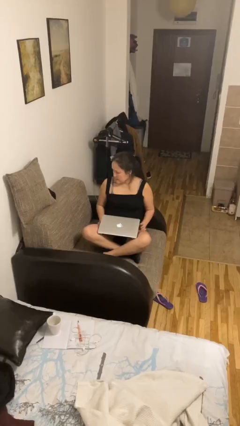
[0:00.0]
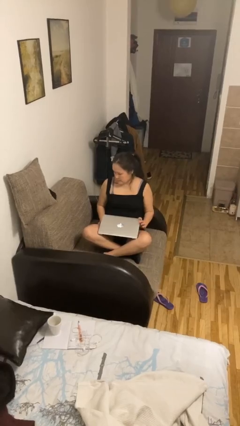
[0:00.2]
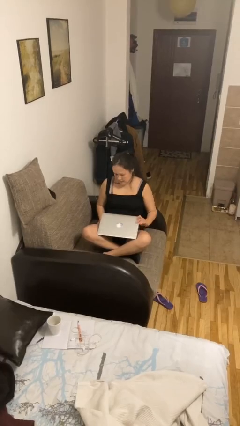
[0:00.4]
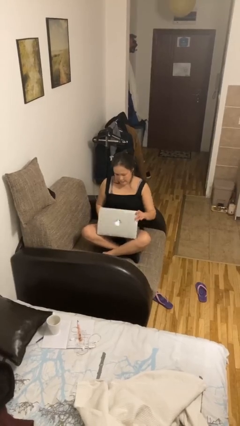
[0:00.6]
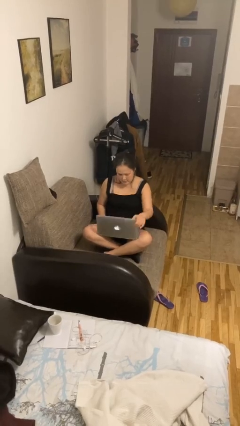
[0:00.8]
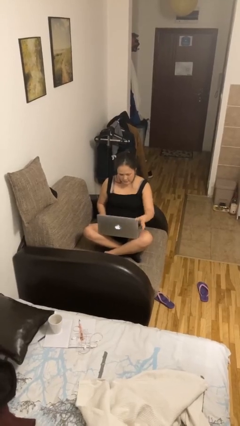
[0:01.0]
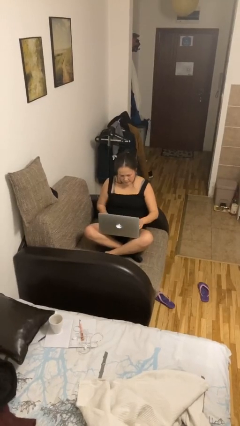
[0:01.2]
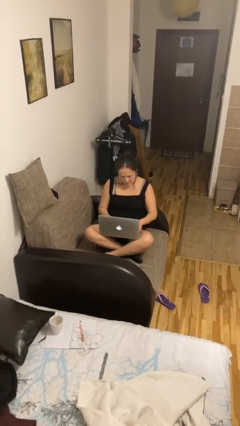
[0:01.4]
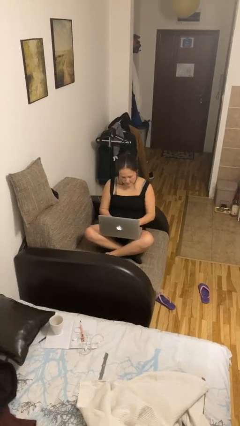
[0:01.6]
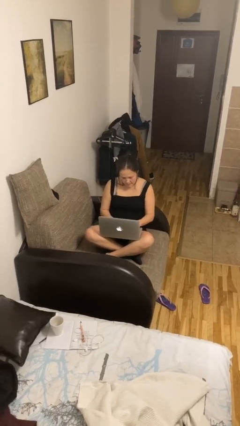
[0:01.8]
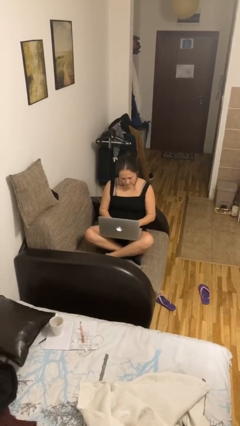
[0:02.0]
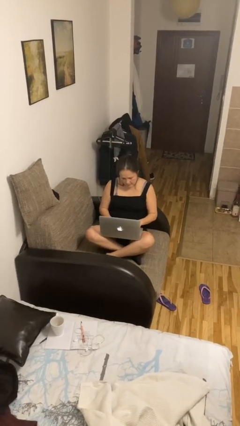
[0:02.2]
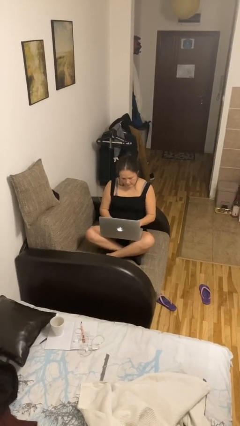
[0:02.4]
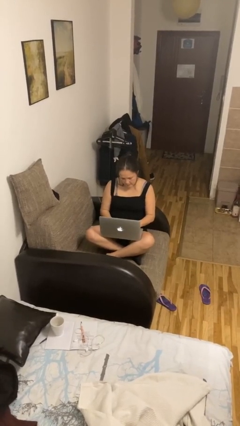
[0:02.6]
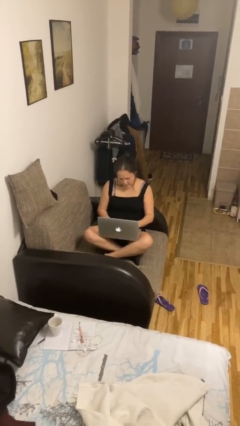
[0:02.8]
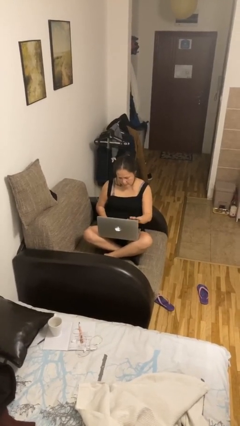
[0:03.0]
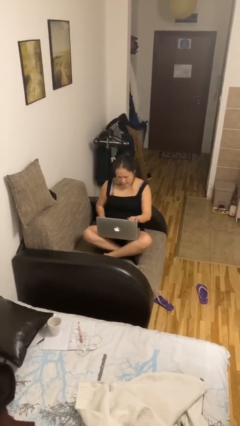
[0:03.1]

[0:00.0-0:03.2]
person interacts with laptop

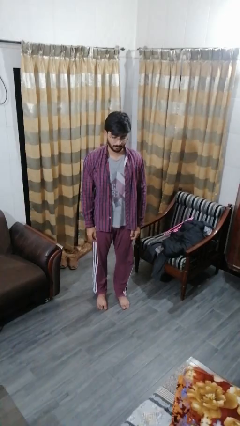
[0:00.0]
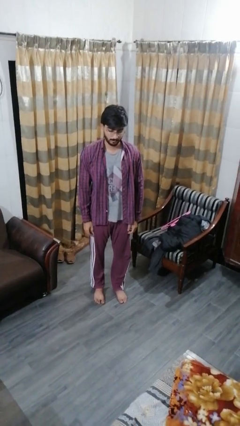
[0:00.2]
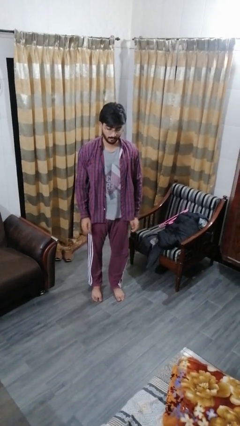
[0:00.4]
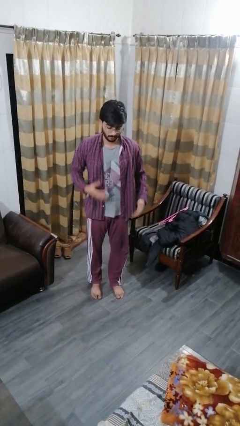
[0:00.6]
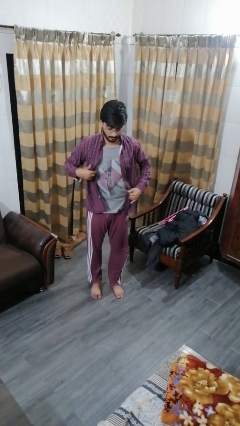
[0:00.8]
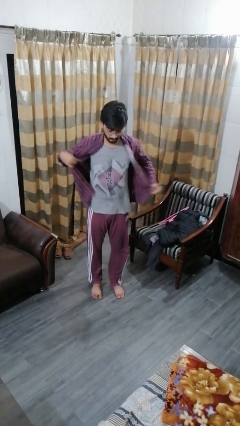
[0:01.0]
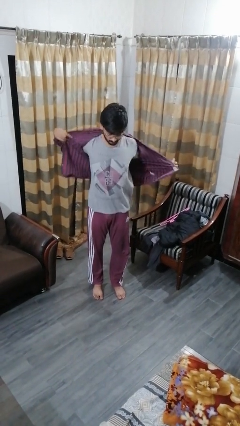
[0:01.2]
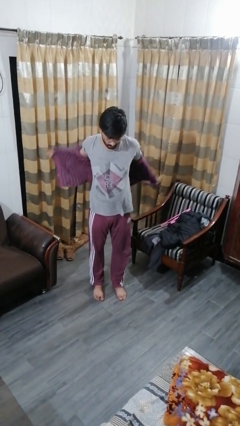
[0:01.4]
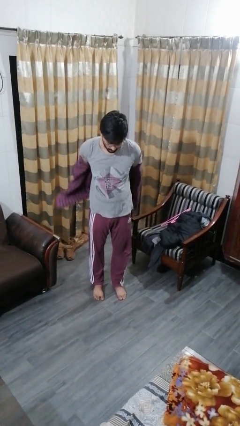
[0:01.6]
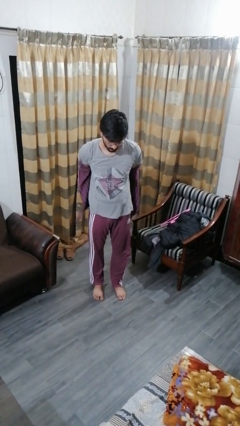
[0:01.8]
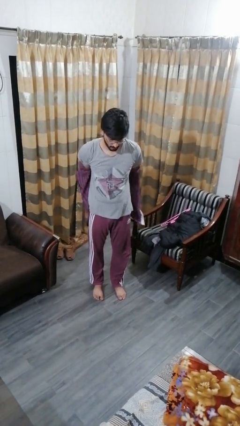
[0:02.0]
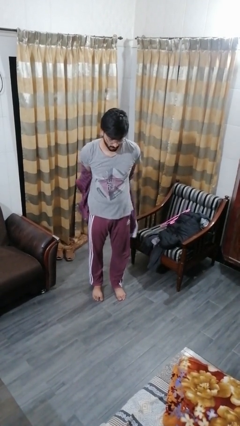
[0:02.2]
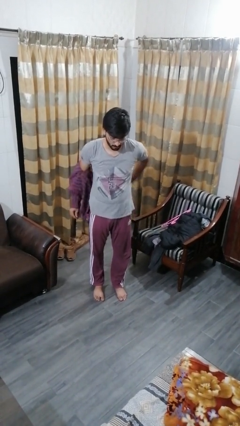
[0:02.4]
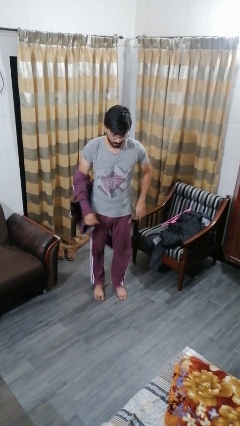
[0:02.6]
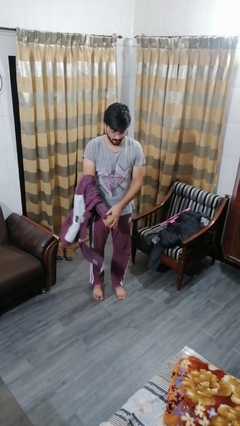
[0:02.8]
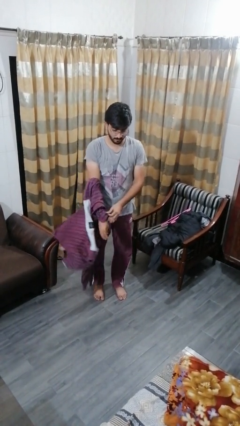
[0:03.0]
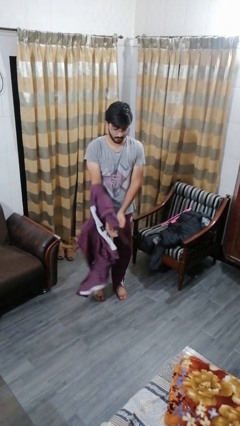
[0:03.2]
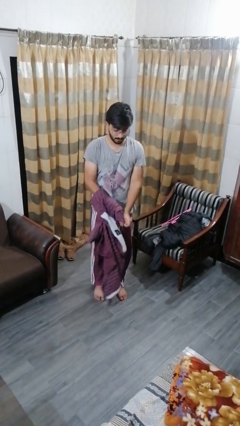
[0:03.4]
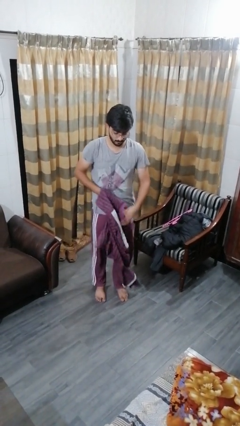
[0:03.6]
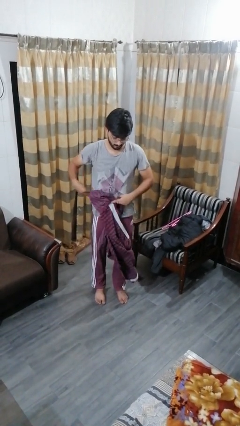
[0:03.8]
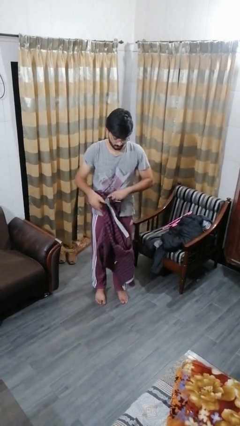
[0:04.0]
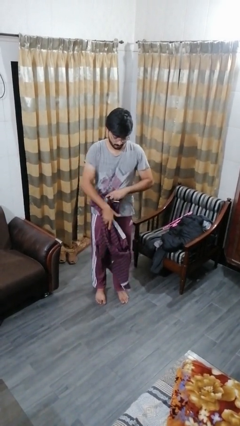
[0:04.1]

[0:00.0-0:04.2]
person takes off shirt

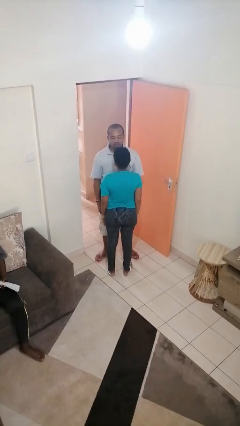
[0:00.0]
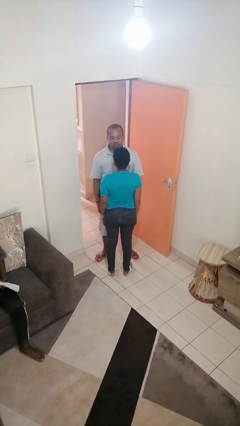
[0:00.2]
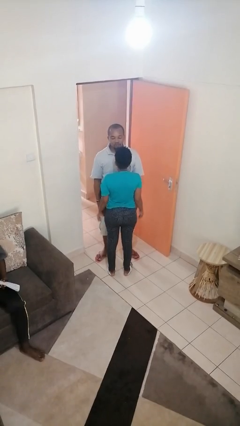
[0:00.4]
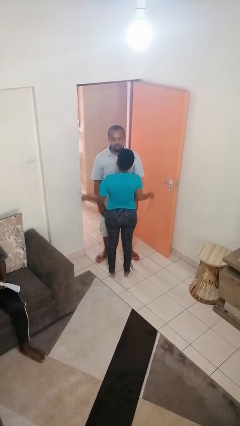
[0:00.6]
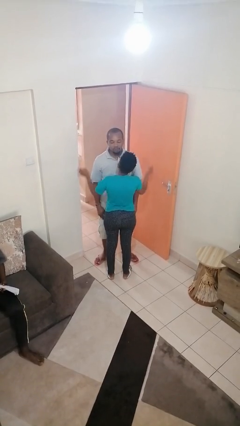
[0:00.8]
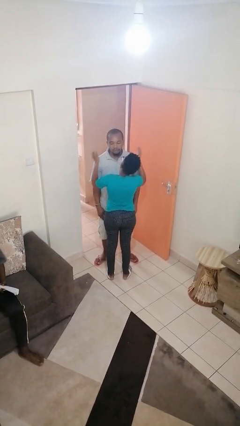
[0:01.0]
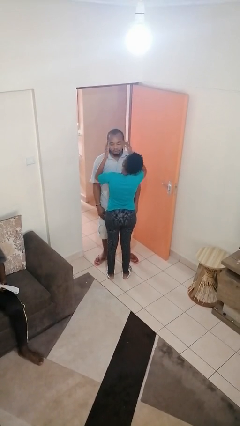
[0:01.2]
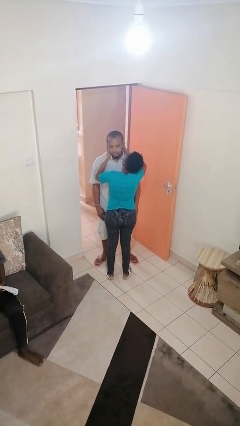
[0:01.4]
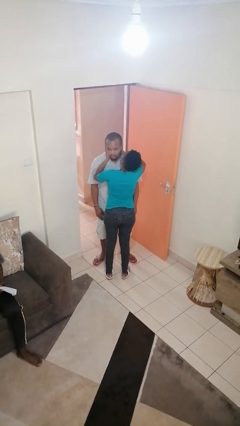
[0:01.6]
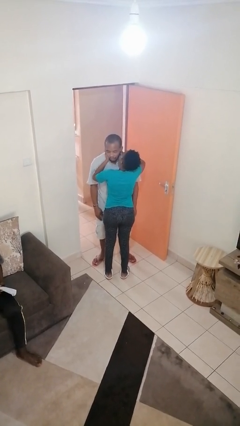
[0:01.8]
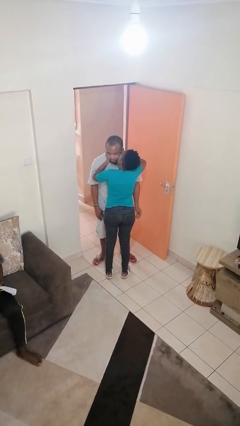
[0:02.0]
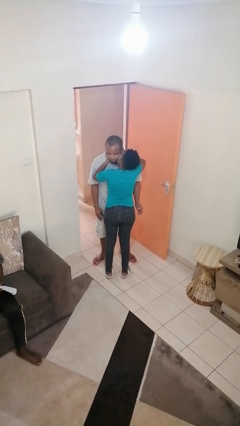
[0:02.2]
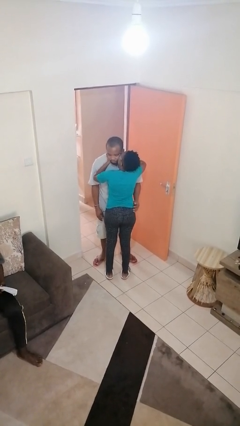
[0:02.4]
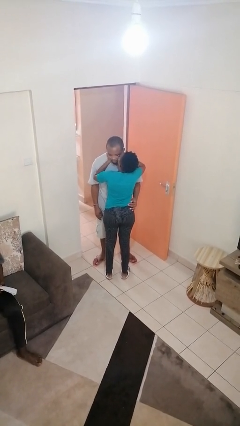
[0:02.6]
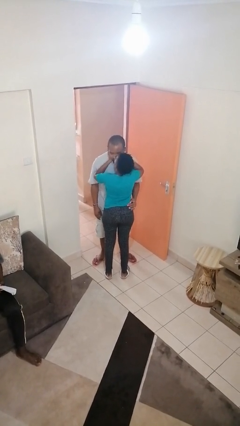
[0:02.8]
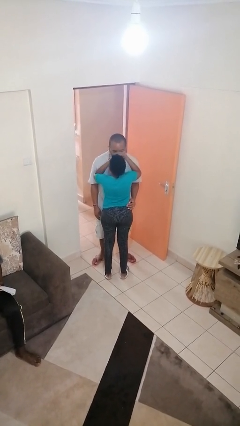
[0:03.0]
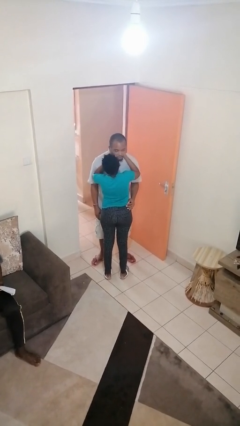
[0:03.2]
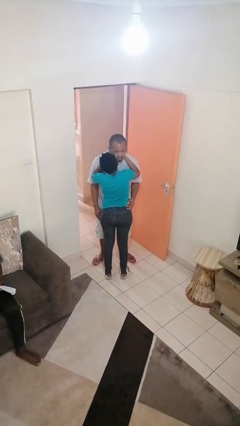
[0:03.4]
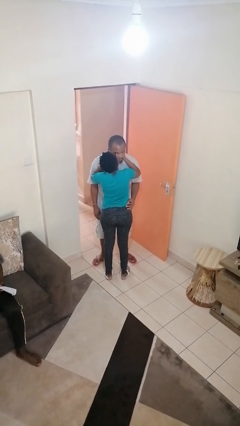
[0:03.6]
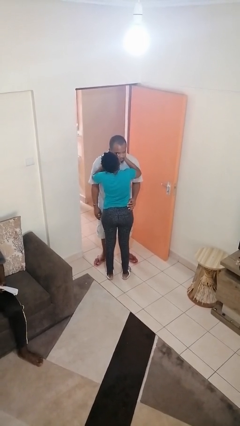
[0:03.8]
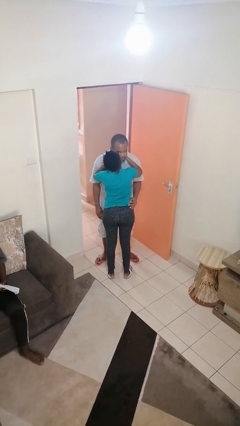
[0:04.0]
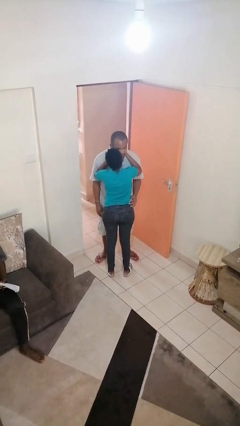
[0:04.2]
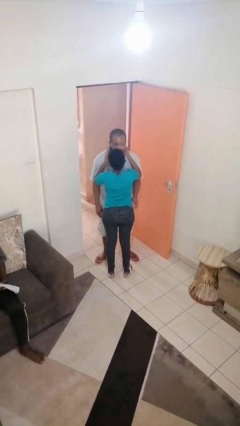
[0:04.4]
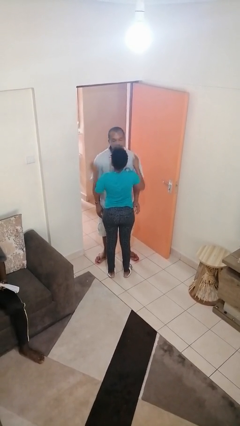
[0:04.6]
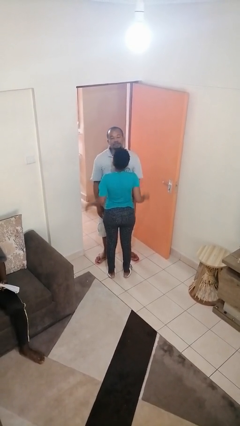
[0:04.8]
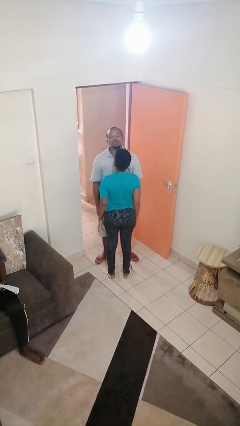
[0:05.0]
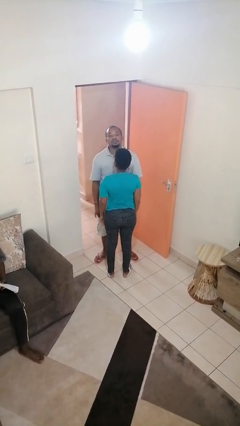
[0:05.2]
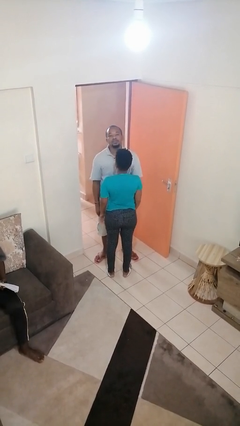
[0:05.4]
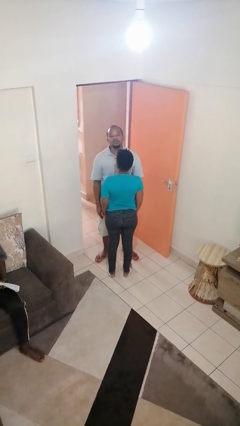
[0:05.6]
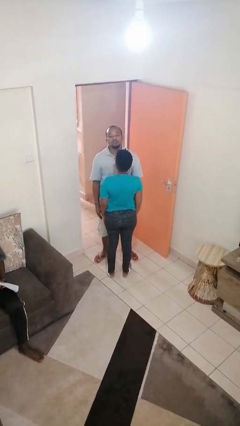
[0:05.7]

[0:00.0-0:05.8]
person kisses cheek of person

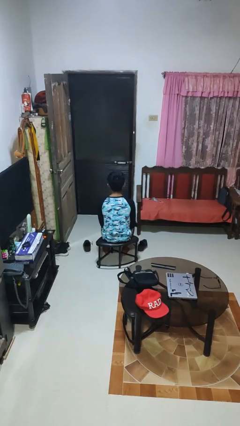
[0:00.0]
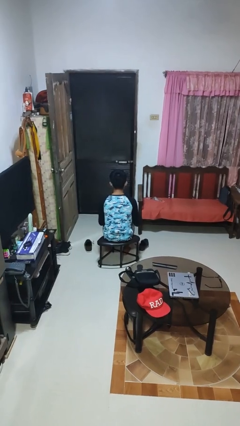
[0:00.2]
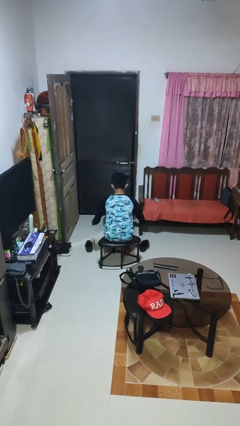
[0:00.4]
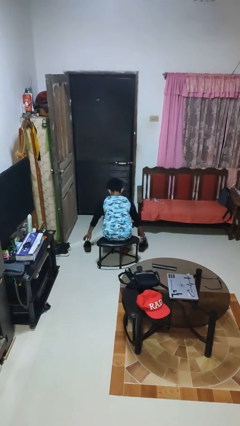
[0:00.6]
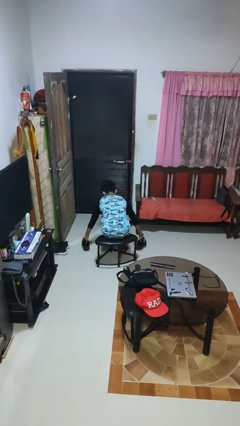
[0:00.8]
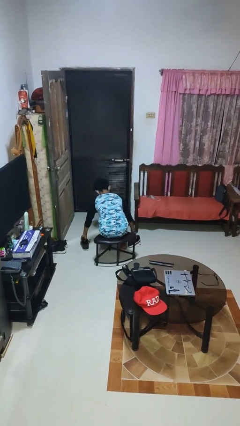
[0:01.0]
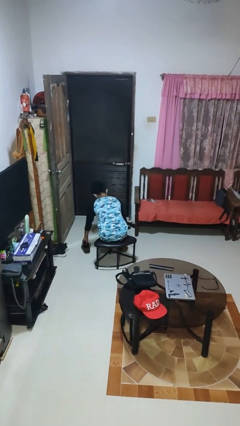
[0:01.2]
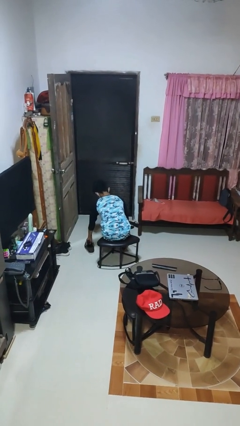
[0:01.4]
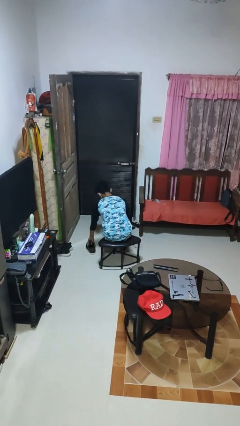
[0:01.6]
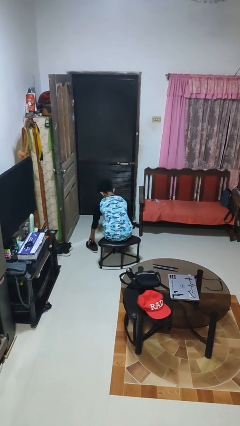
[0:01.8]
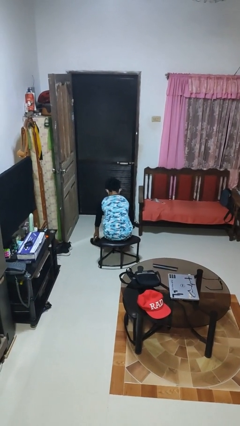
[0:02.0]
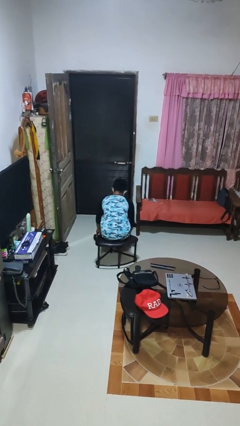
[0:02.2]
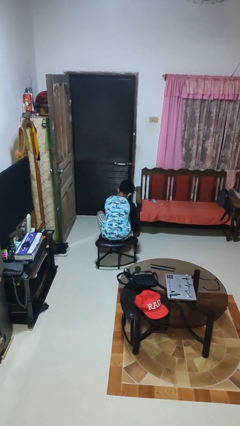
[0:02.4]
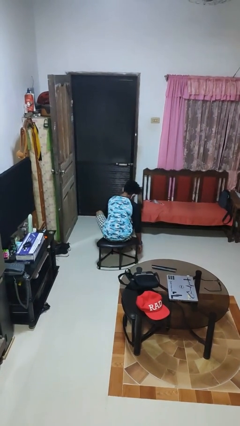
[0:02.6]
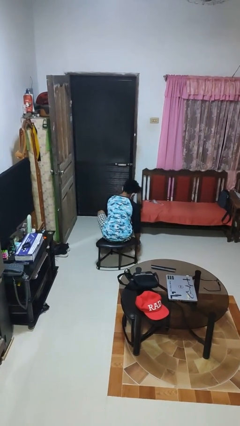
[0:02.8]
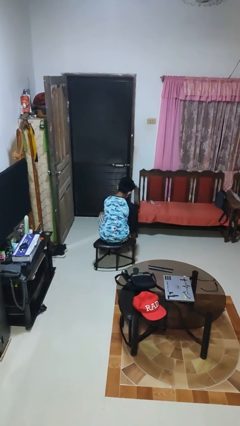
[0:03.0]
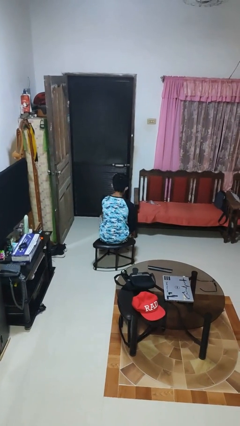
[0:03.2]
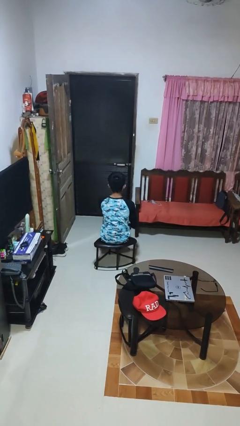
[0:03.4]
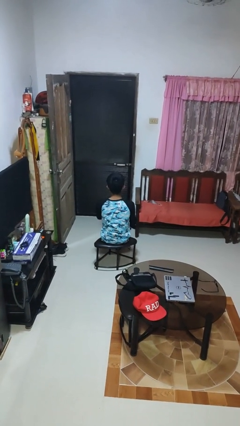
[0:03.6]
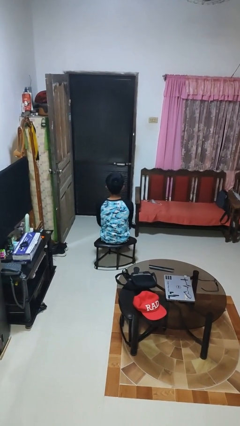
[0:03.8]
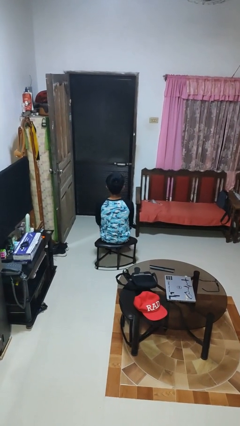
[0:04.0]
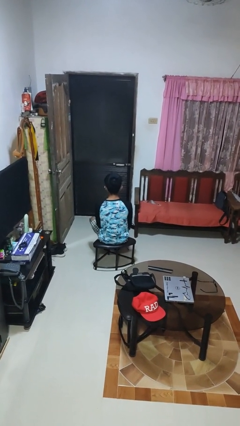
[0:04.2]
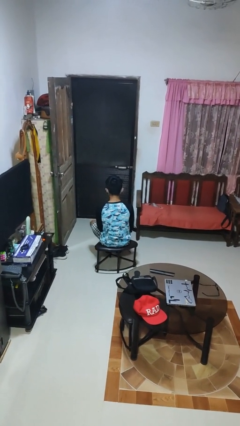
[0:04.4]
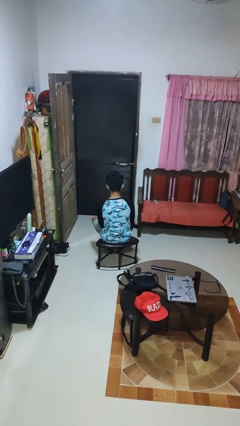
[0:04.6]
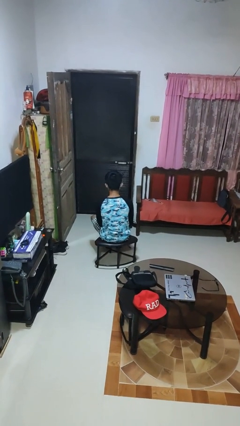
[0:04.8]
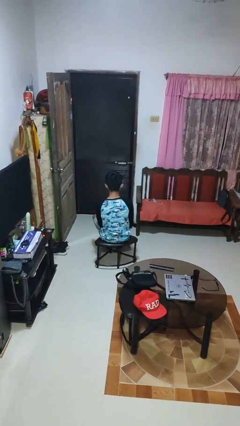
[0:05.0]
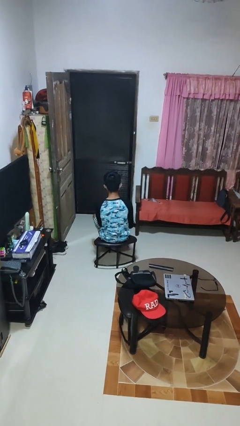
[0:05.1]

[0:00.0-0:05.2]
person puts on shoes
